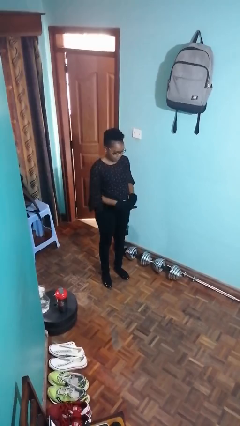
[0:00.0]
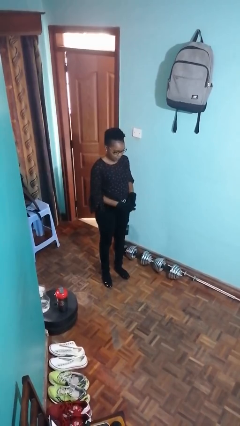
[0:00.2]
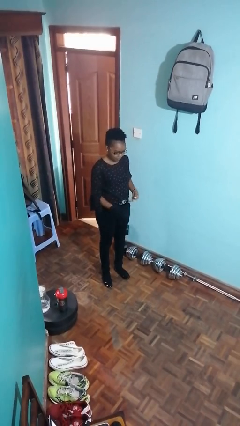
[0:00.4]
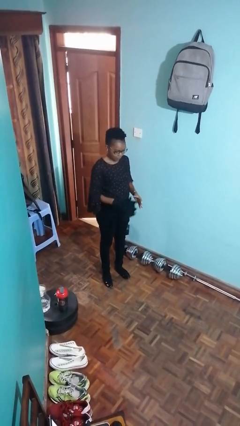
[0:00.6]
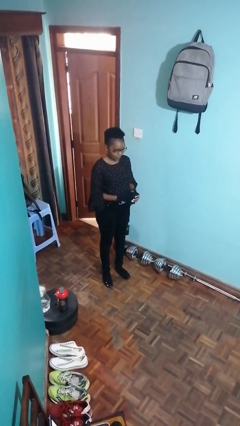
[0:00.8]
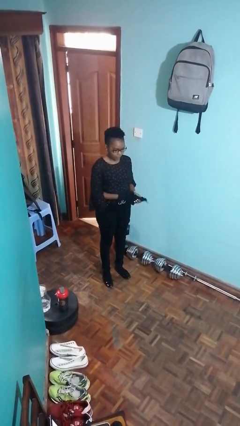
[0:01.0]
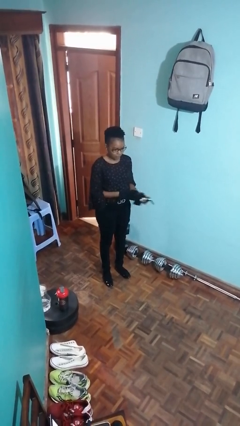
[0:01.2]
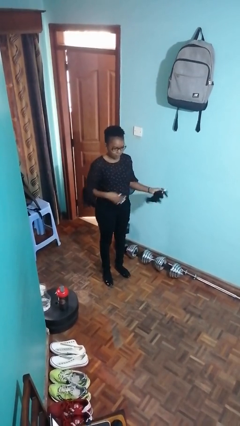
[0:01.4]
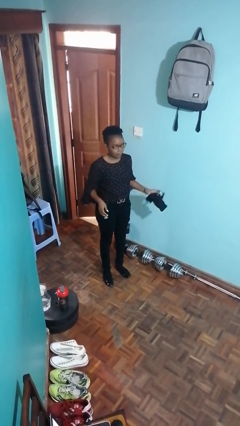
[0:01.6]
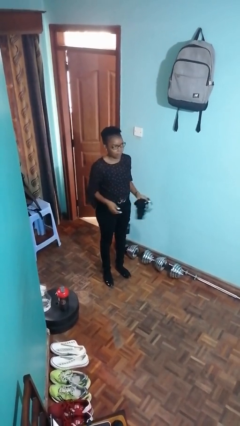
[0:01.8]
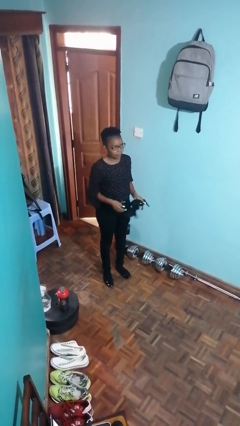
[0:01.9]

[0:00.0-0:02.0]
person takes off gloves

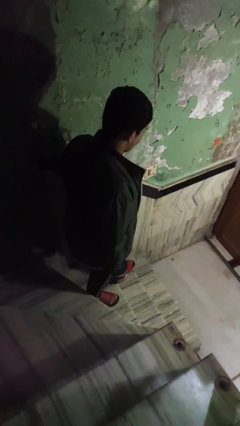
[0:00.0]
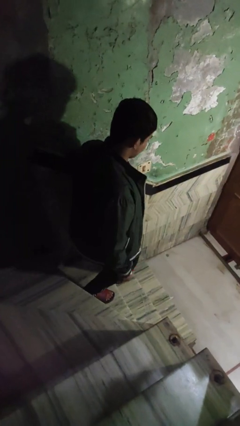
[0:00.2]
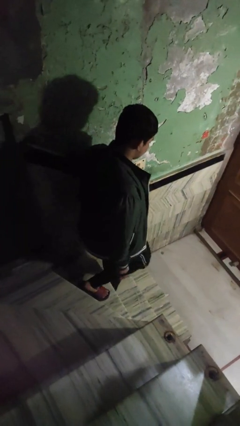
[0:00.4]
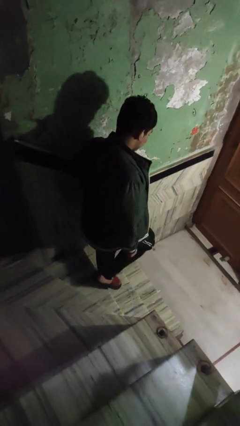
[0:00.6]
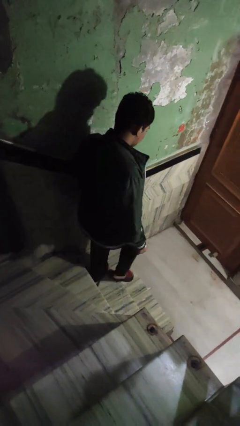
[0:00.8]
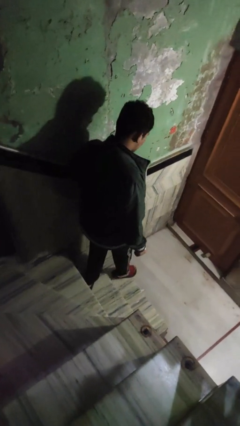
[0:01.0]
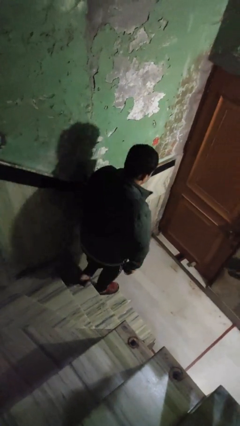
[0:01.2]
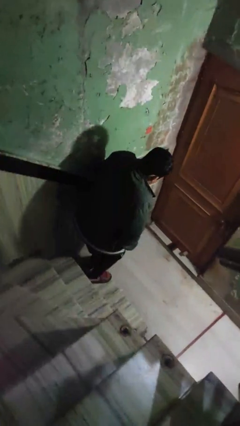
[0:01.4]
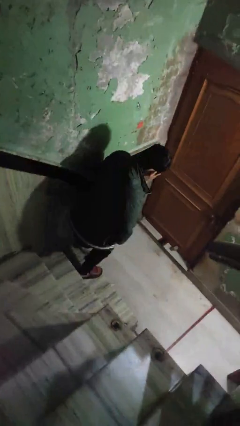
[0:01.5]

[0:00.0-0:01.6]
person climbs down stairs

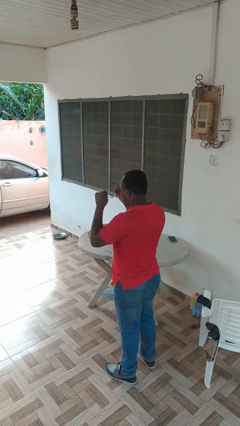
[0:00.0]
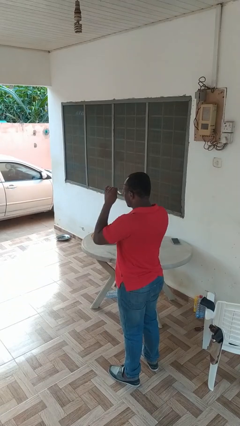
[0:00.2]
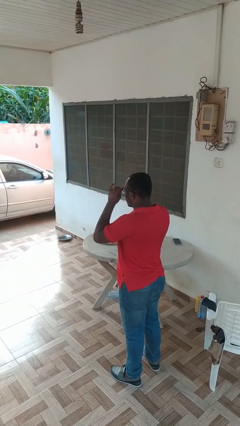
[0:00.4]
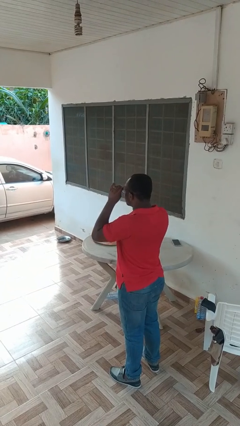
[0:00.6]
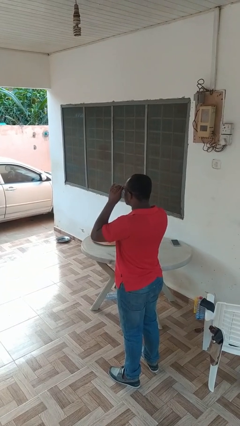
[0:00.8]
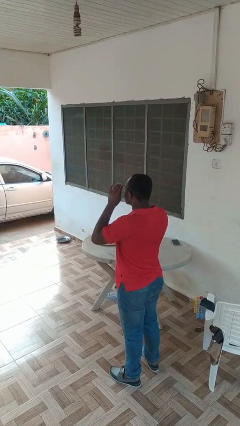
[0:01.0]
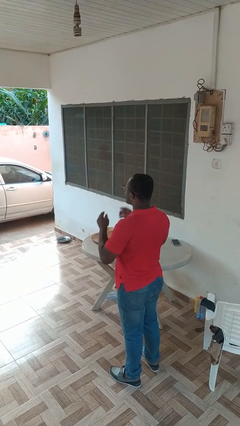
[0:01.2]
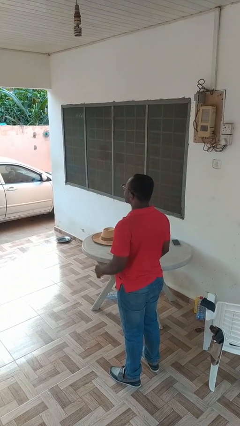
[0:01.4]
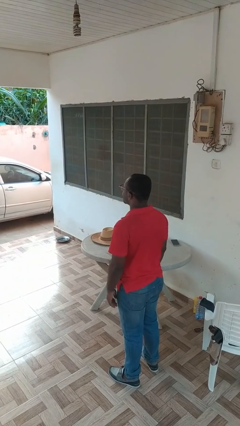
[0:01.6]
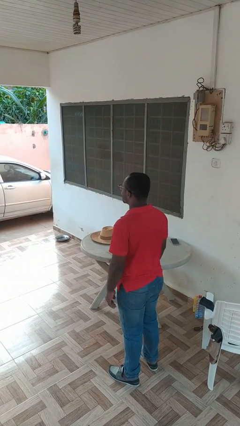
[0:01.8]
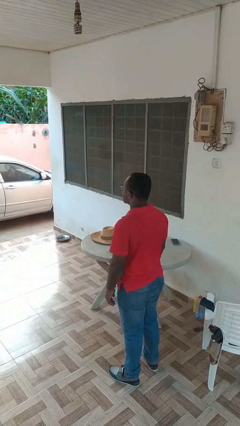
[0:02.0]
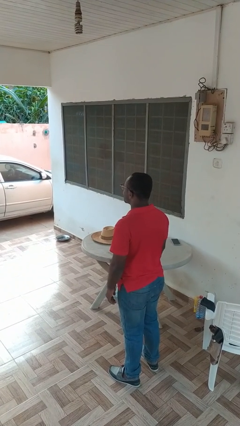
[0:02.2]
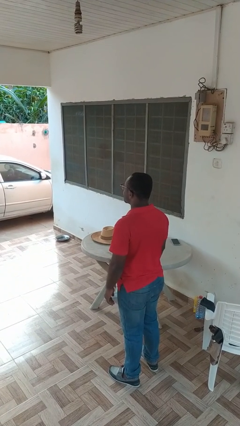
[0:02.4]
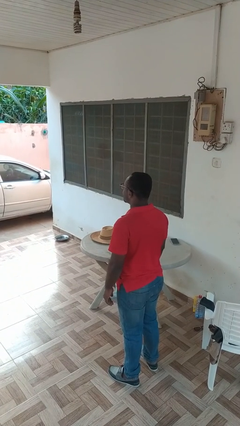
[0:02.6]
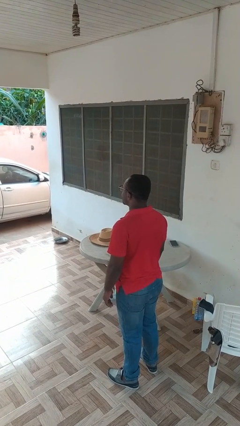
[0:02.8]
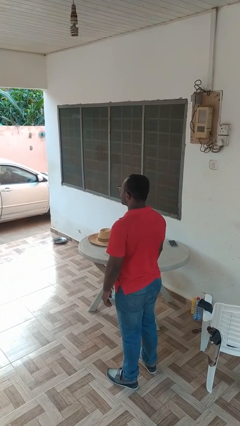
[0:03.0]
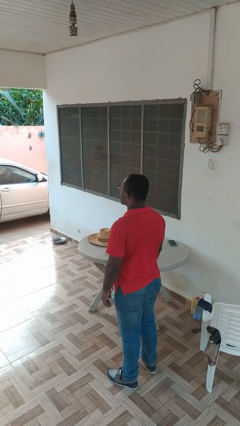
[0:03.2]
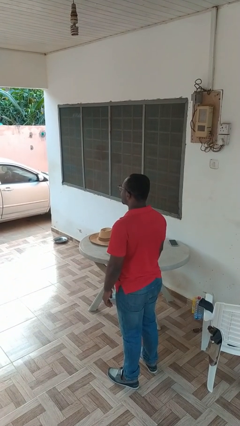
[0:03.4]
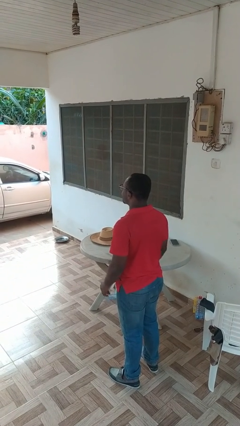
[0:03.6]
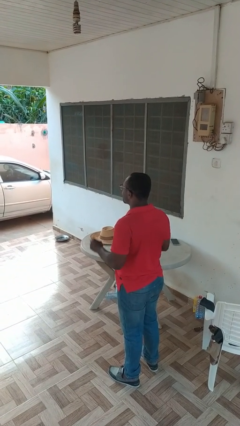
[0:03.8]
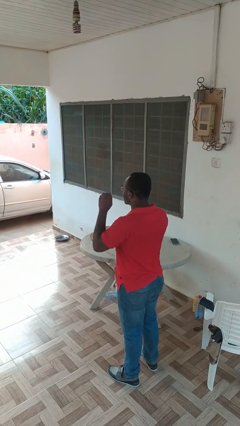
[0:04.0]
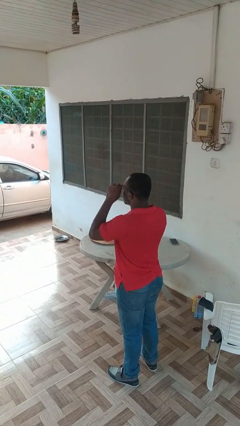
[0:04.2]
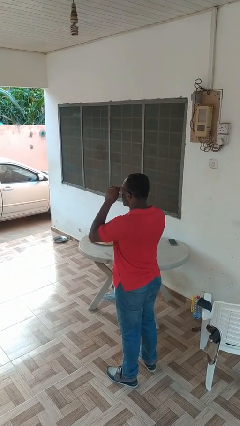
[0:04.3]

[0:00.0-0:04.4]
person puts on glasses

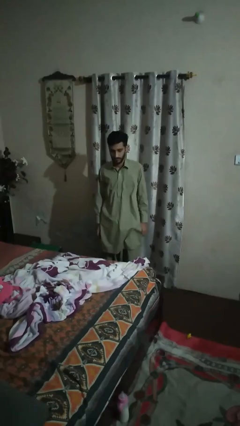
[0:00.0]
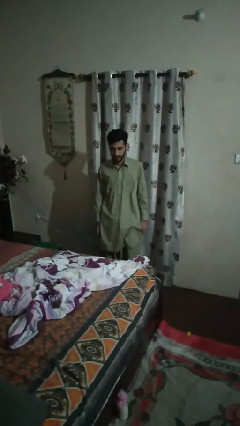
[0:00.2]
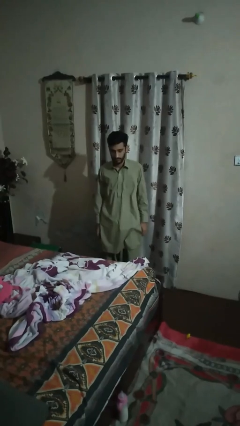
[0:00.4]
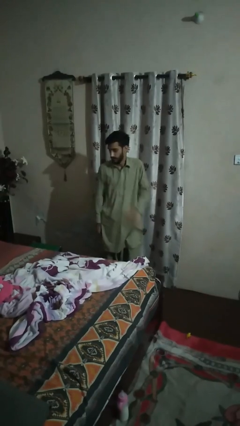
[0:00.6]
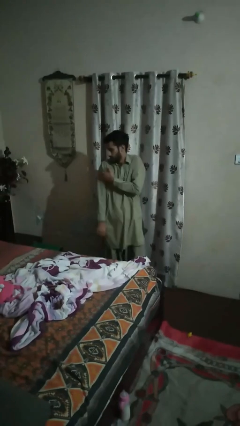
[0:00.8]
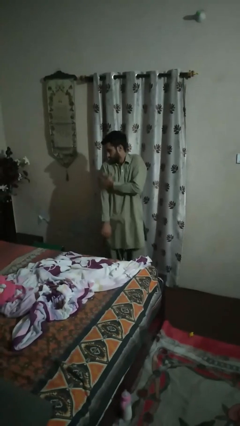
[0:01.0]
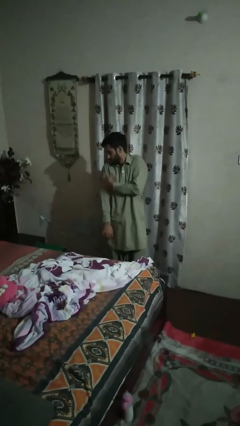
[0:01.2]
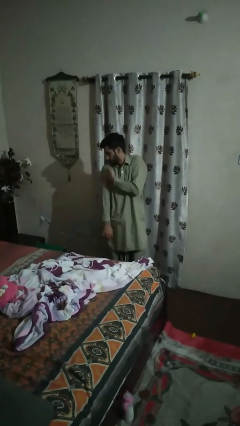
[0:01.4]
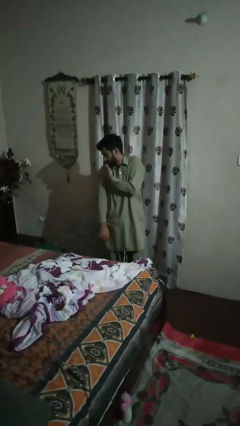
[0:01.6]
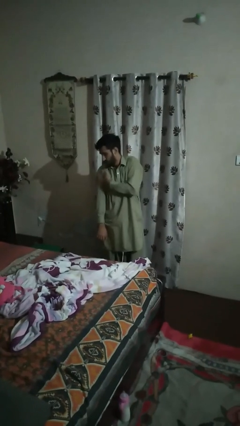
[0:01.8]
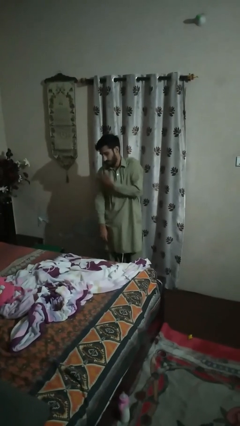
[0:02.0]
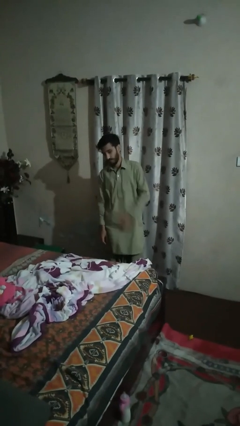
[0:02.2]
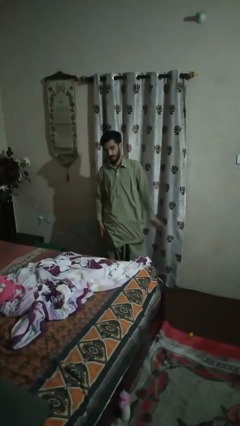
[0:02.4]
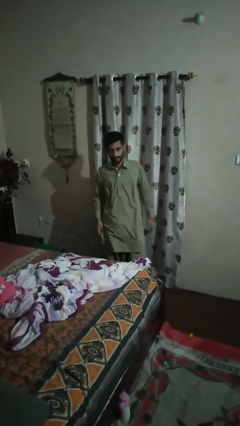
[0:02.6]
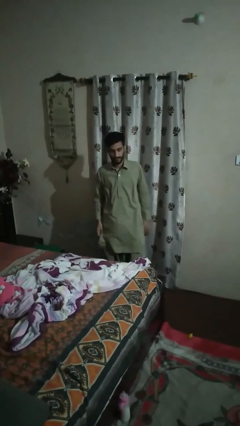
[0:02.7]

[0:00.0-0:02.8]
person swats bug

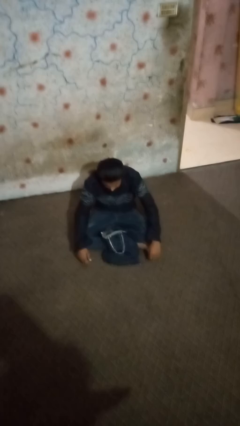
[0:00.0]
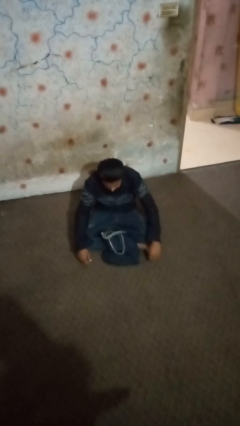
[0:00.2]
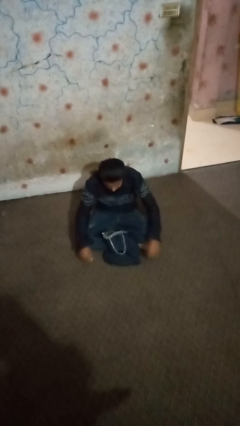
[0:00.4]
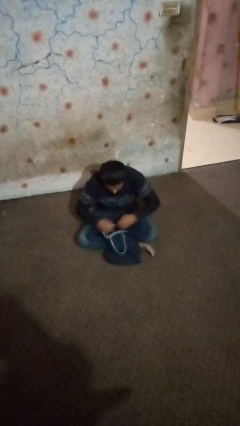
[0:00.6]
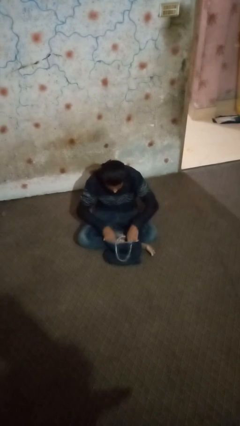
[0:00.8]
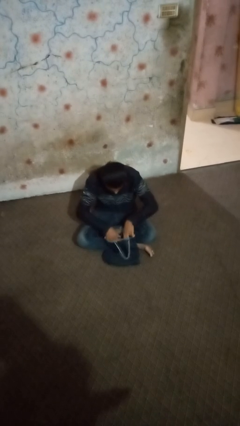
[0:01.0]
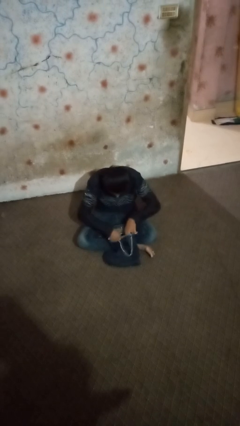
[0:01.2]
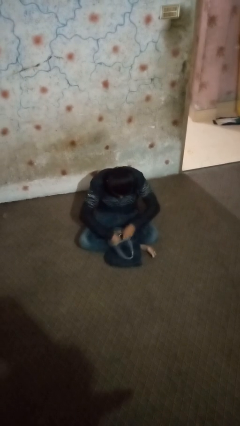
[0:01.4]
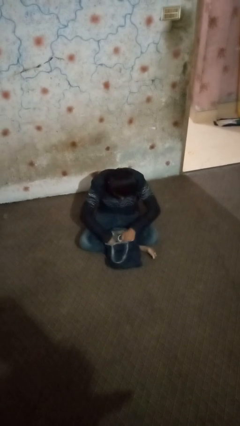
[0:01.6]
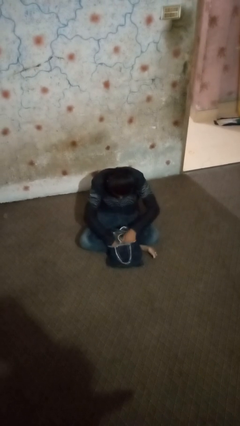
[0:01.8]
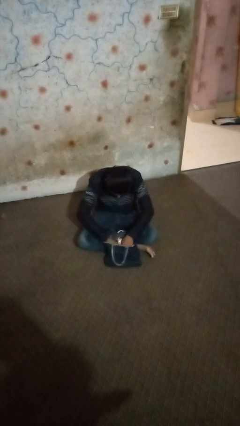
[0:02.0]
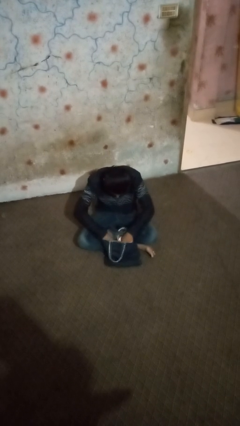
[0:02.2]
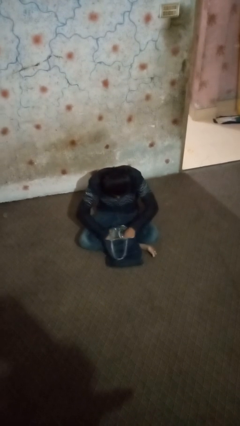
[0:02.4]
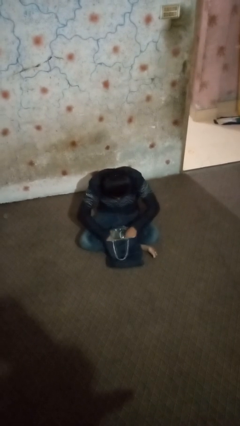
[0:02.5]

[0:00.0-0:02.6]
person searches in bag

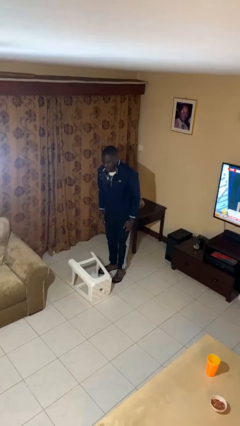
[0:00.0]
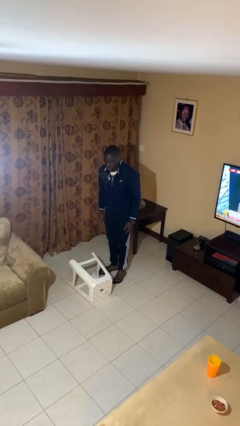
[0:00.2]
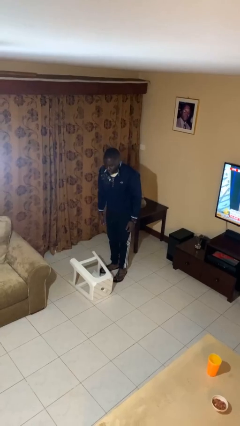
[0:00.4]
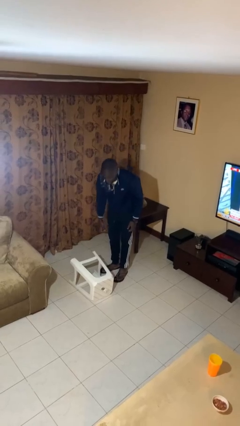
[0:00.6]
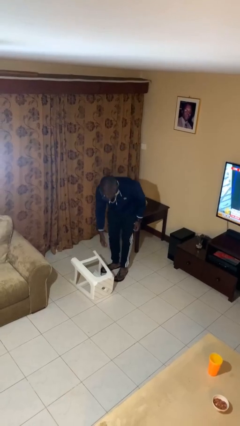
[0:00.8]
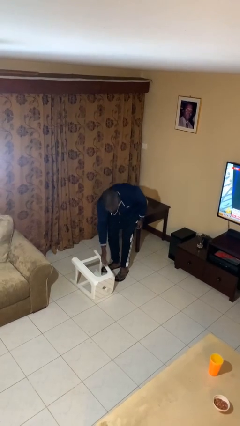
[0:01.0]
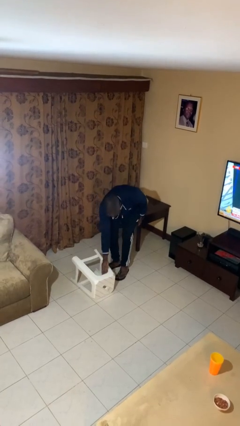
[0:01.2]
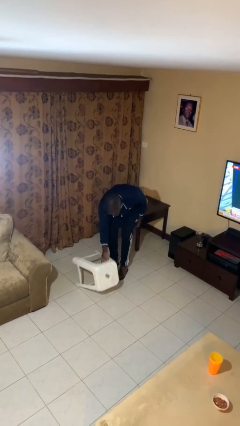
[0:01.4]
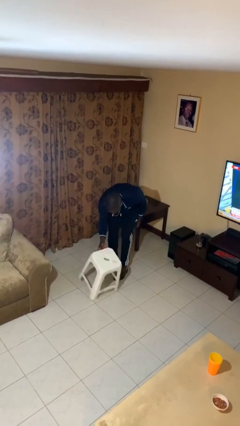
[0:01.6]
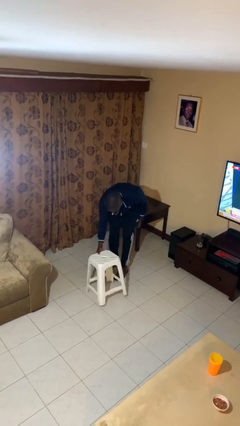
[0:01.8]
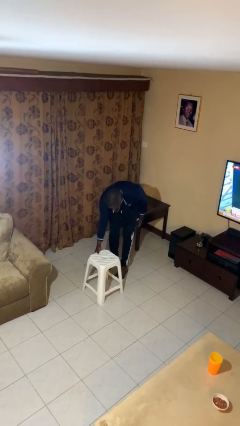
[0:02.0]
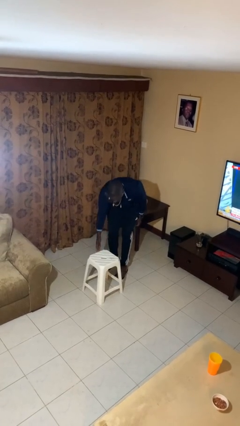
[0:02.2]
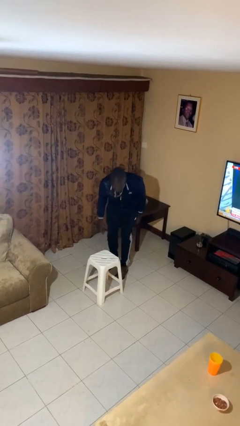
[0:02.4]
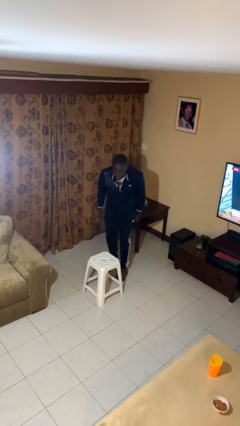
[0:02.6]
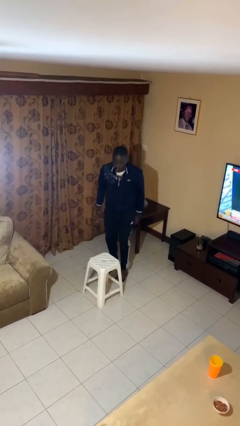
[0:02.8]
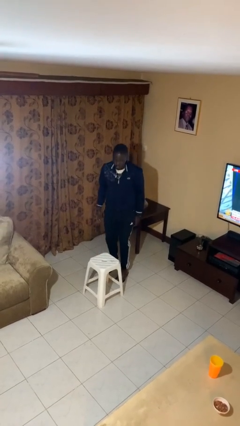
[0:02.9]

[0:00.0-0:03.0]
person sets upright furniture

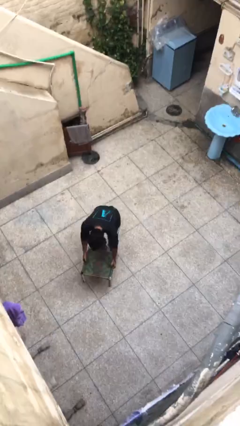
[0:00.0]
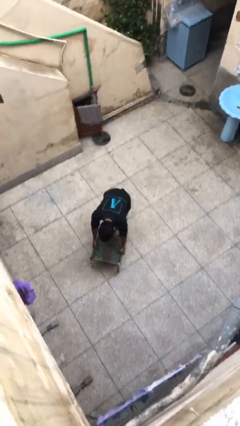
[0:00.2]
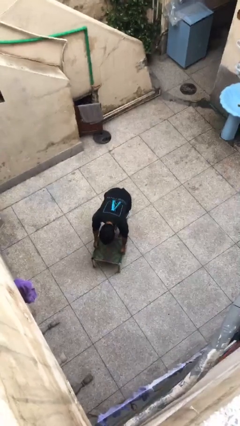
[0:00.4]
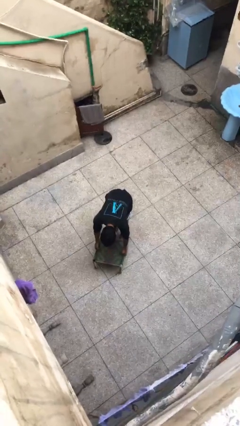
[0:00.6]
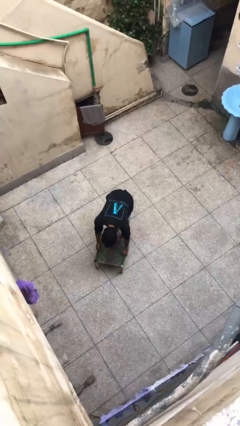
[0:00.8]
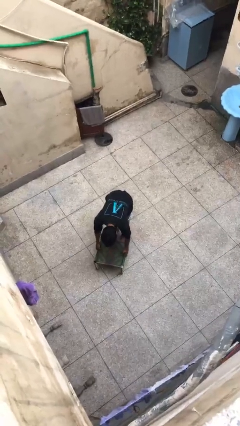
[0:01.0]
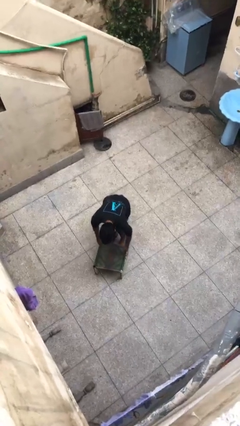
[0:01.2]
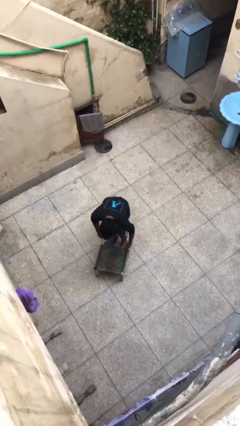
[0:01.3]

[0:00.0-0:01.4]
person puts down object on floor
